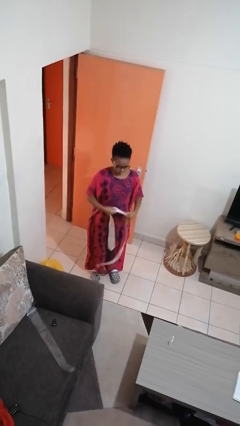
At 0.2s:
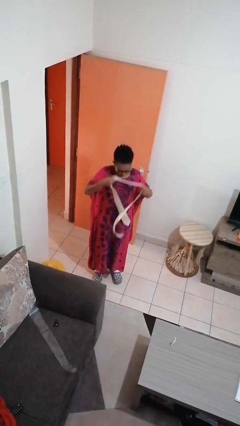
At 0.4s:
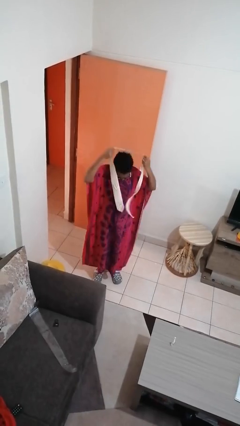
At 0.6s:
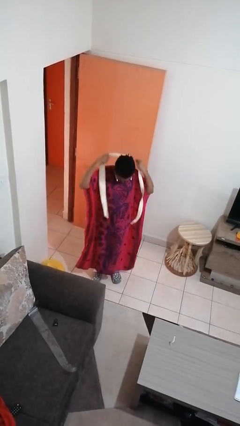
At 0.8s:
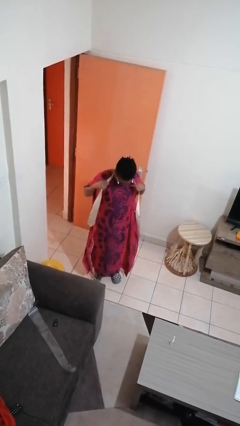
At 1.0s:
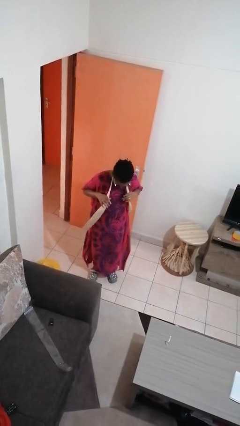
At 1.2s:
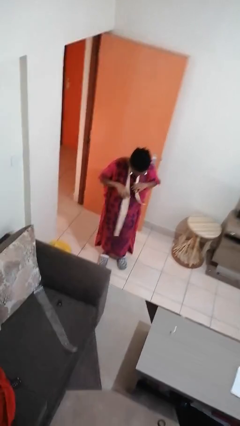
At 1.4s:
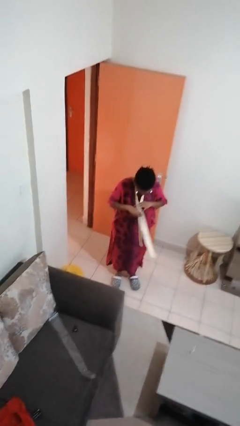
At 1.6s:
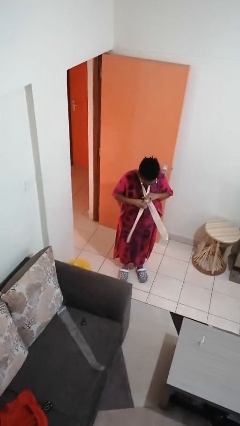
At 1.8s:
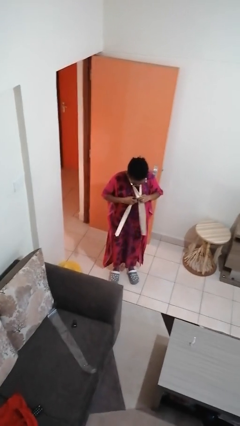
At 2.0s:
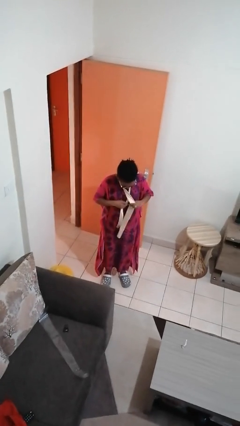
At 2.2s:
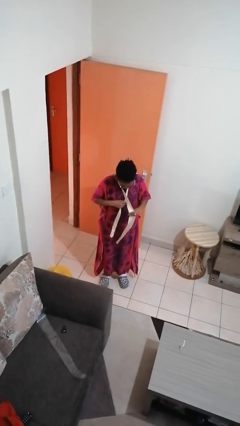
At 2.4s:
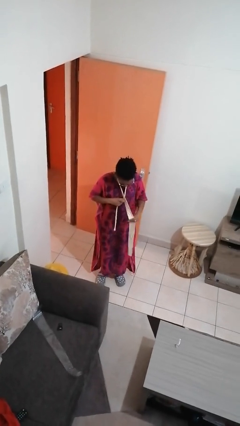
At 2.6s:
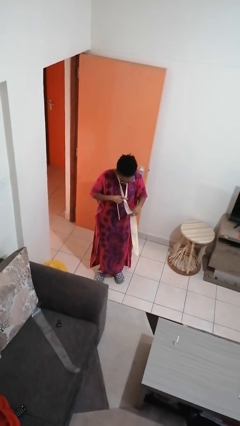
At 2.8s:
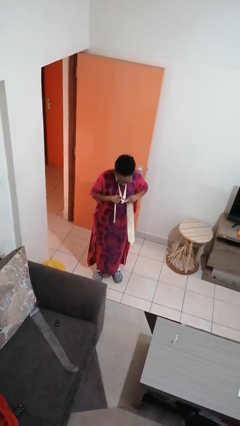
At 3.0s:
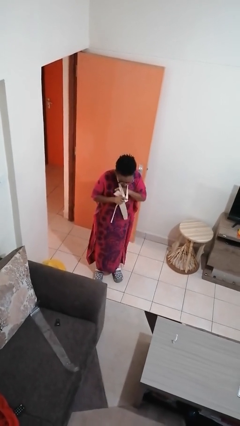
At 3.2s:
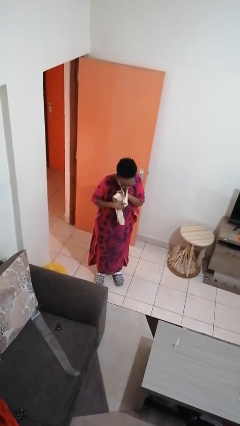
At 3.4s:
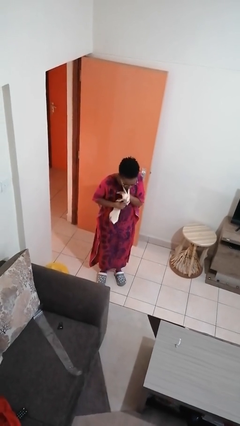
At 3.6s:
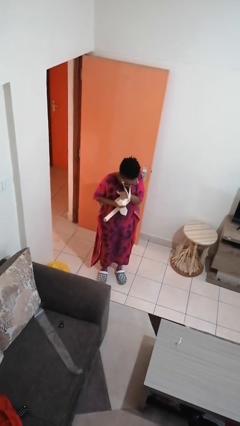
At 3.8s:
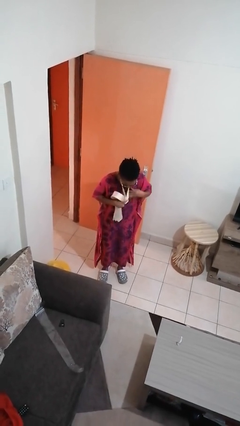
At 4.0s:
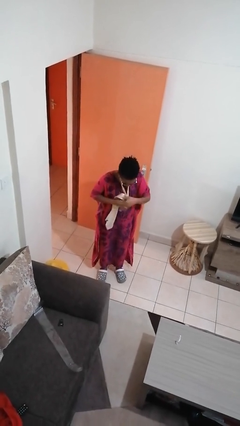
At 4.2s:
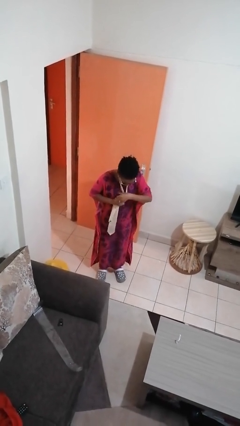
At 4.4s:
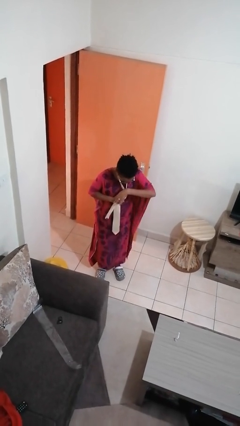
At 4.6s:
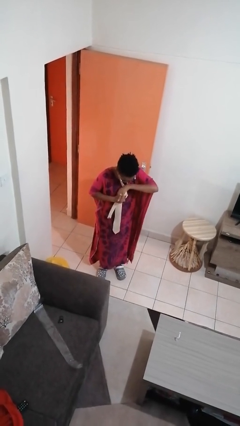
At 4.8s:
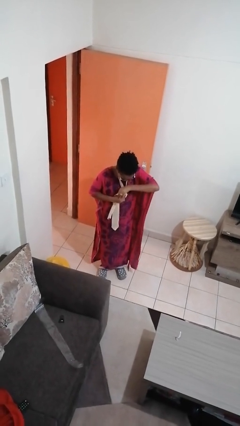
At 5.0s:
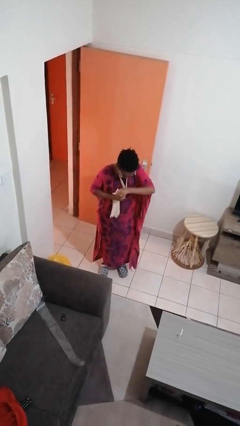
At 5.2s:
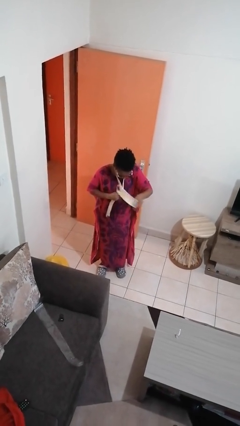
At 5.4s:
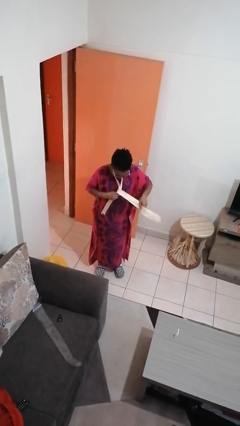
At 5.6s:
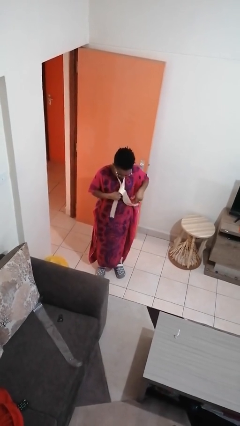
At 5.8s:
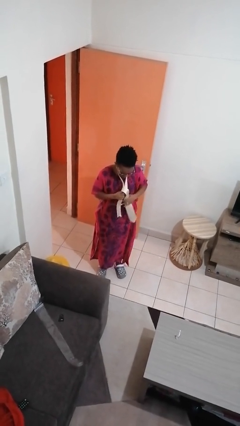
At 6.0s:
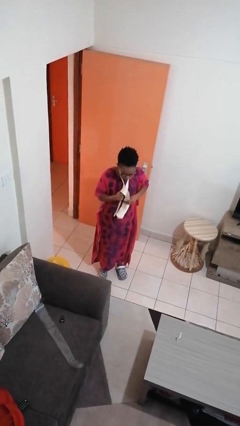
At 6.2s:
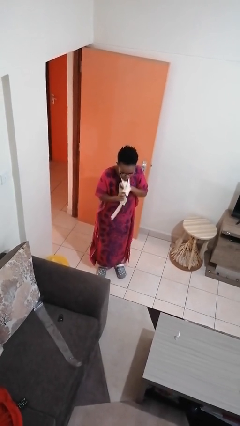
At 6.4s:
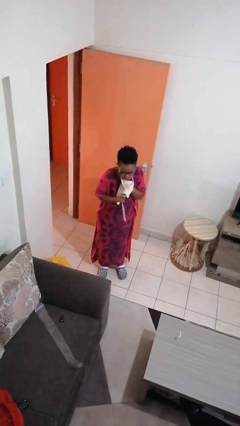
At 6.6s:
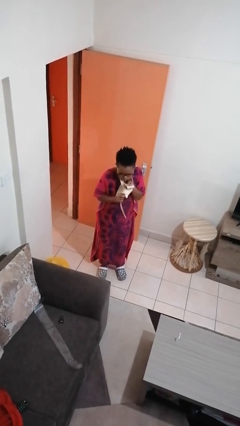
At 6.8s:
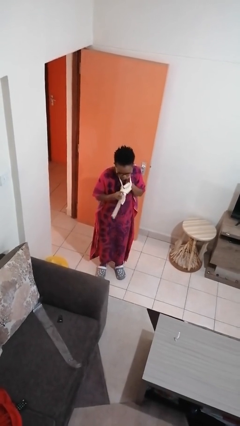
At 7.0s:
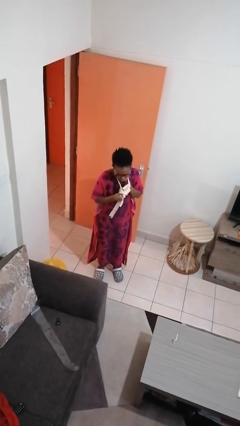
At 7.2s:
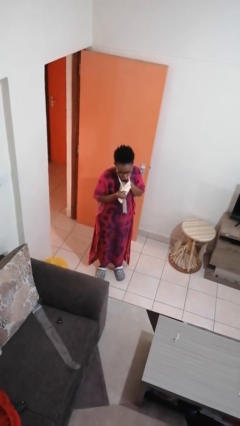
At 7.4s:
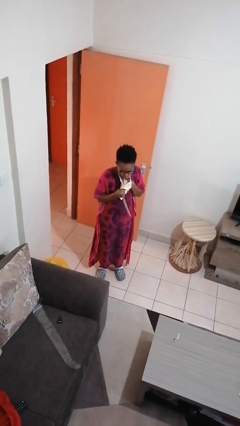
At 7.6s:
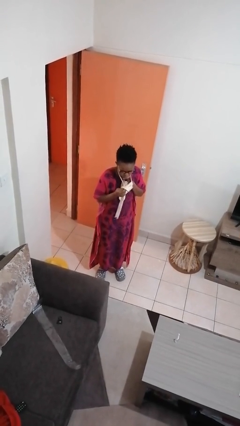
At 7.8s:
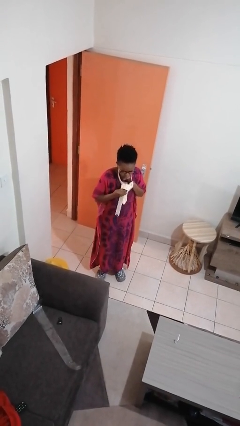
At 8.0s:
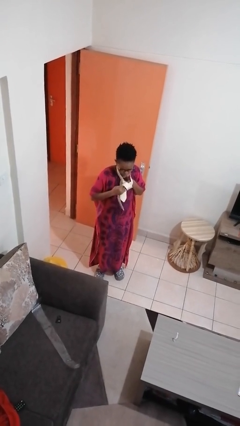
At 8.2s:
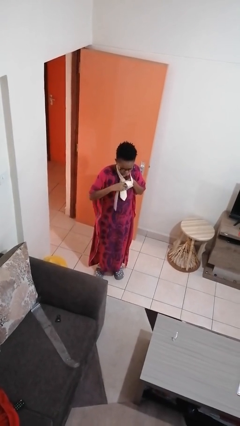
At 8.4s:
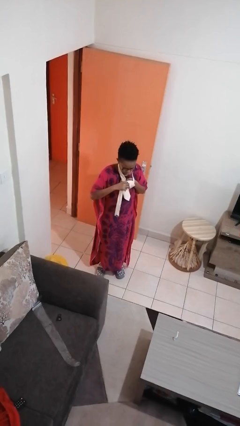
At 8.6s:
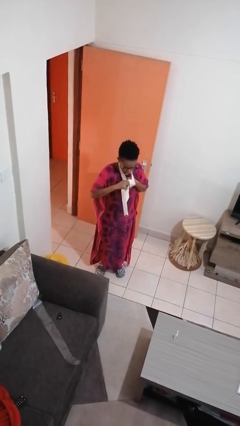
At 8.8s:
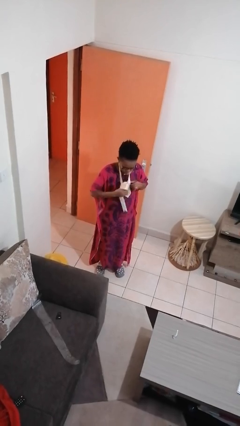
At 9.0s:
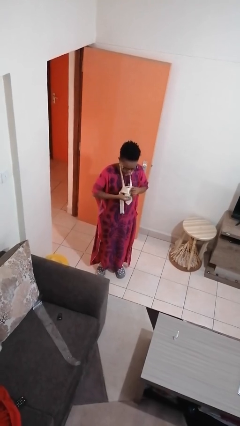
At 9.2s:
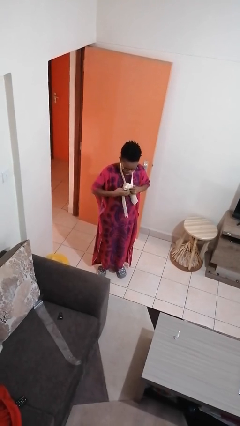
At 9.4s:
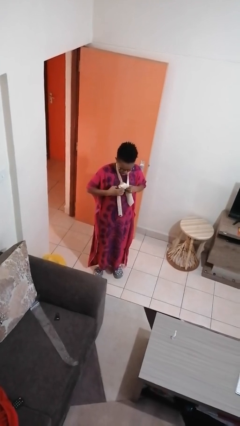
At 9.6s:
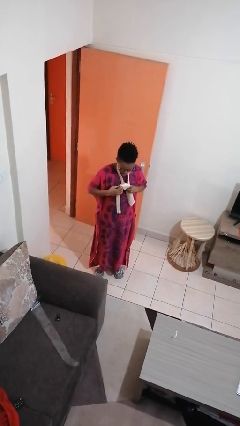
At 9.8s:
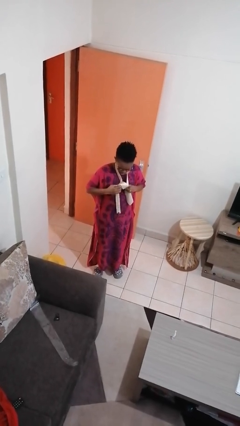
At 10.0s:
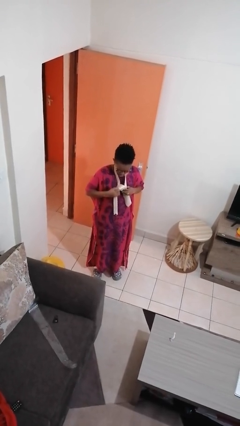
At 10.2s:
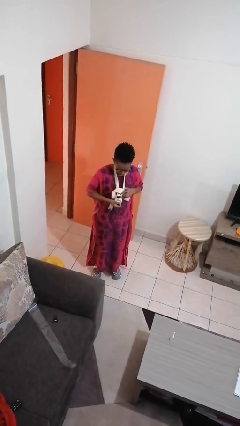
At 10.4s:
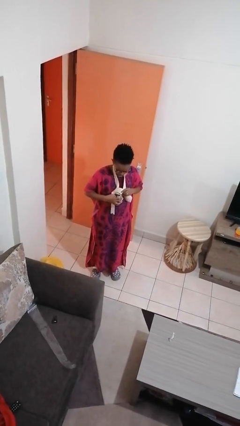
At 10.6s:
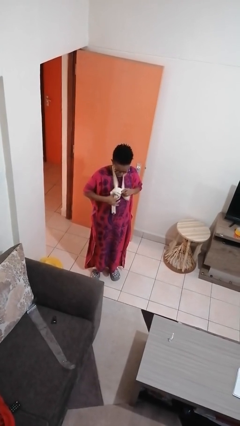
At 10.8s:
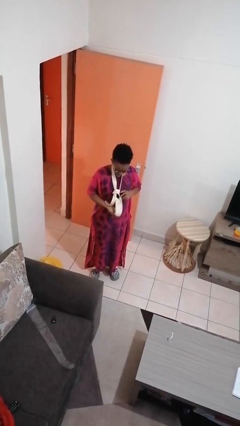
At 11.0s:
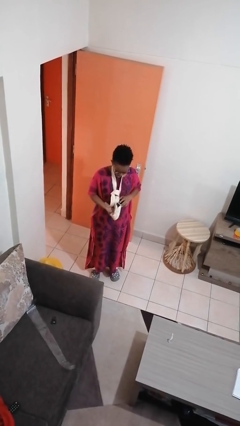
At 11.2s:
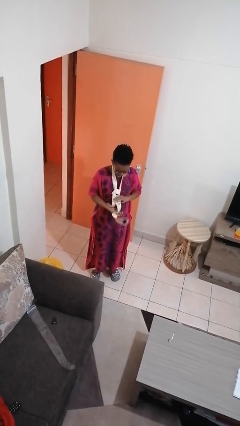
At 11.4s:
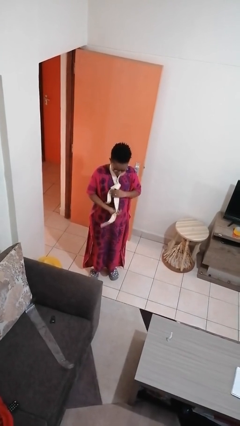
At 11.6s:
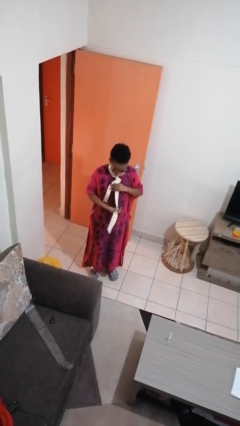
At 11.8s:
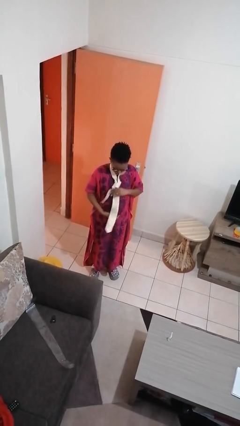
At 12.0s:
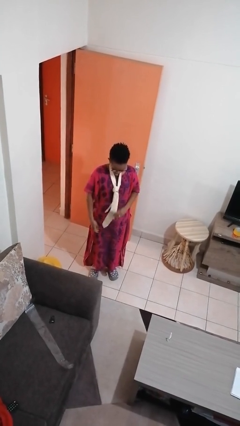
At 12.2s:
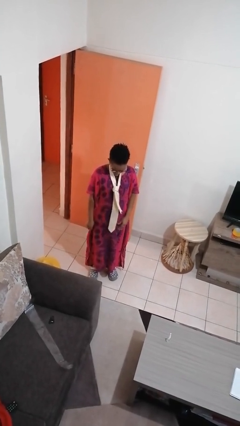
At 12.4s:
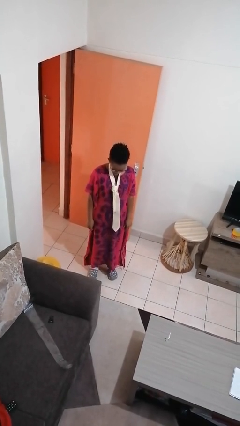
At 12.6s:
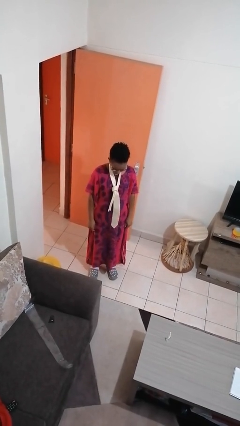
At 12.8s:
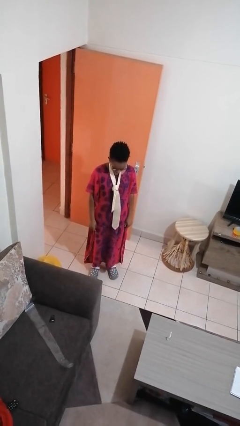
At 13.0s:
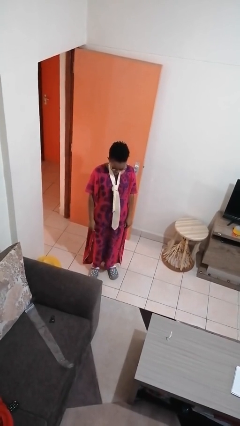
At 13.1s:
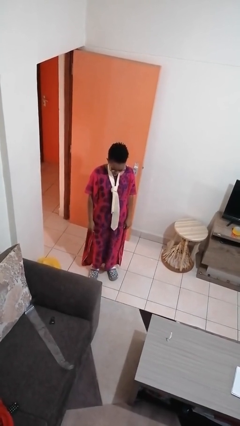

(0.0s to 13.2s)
person puts on necktie

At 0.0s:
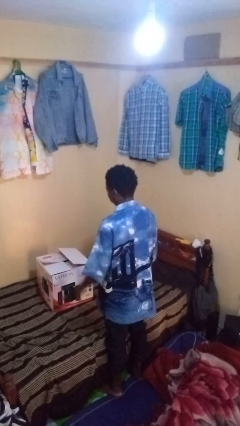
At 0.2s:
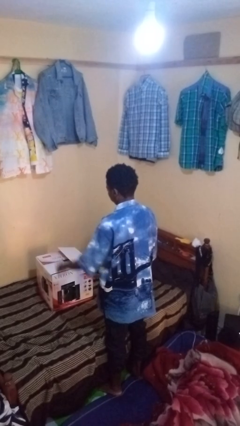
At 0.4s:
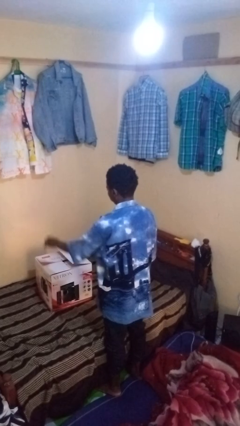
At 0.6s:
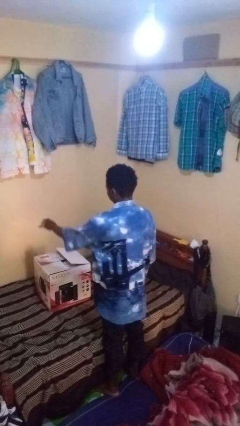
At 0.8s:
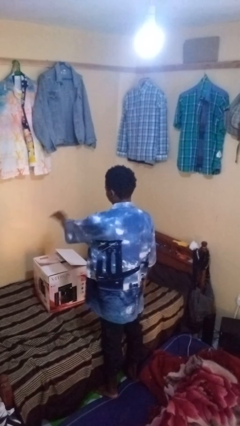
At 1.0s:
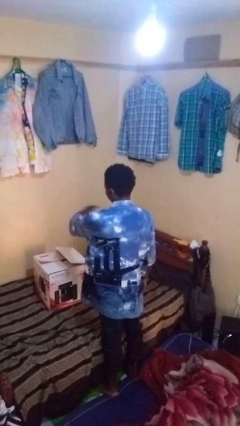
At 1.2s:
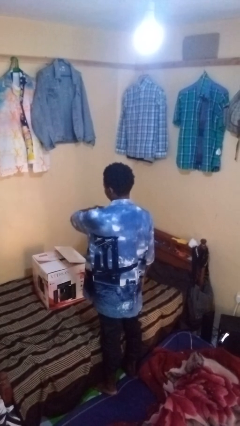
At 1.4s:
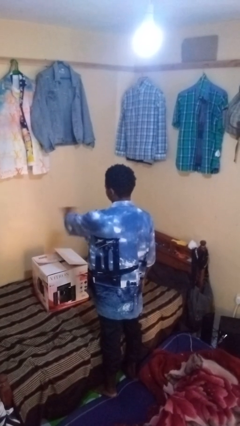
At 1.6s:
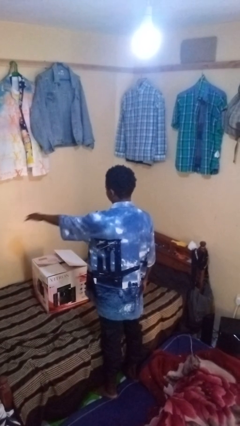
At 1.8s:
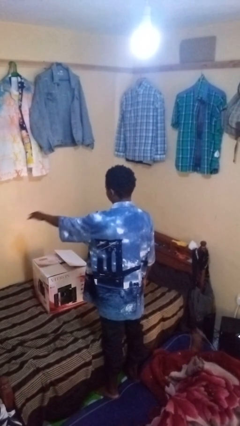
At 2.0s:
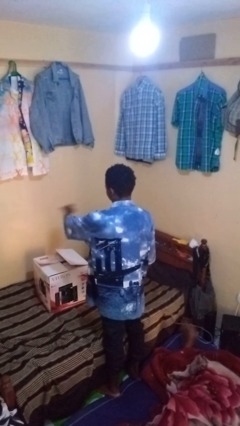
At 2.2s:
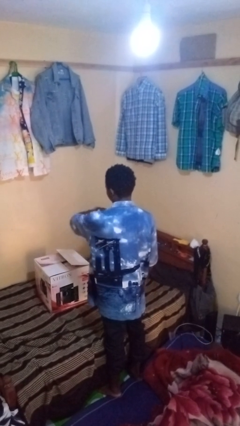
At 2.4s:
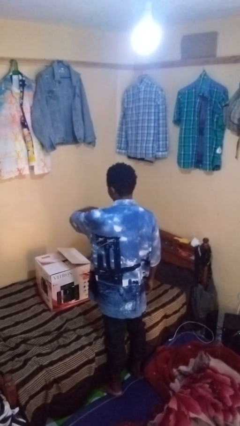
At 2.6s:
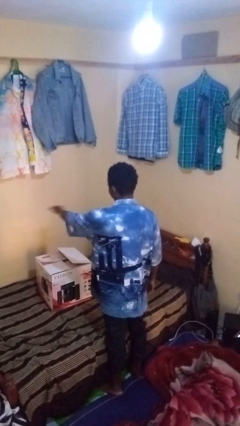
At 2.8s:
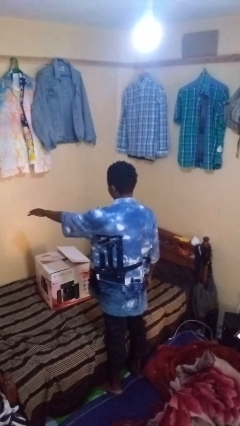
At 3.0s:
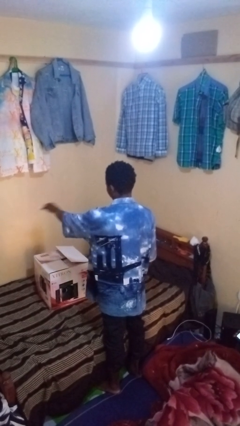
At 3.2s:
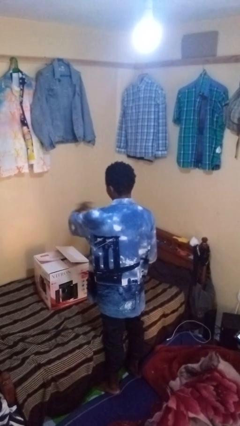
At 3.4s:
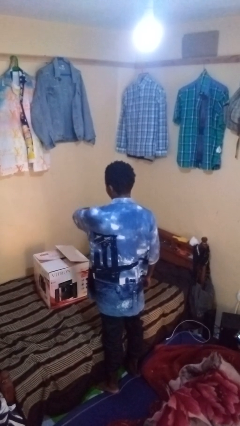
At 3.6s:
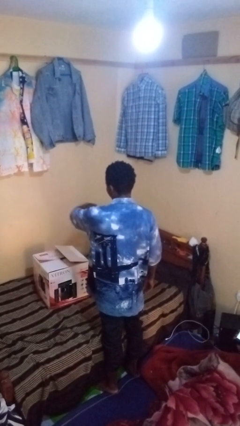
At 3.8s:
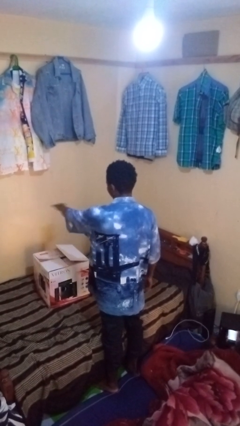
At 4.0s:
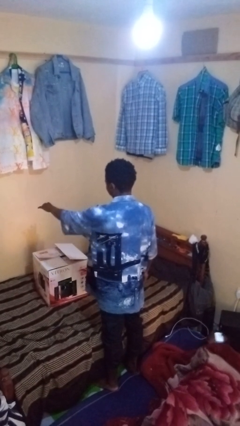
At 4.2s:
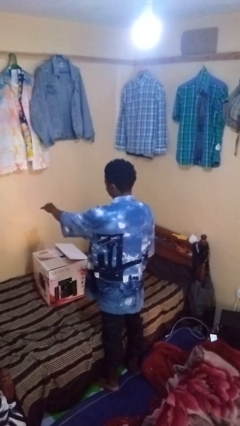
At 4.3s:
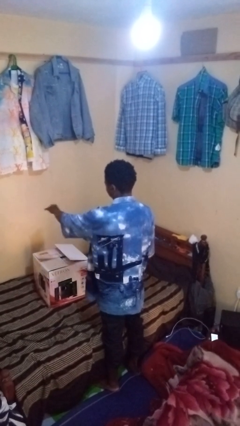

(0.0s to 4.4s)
person waves hand over object
